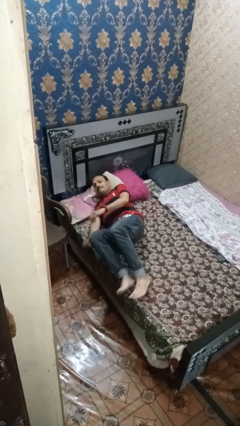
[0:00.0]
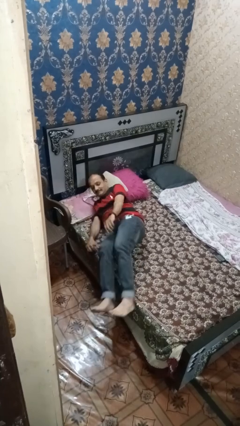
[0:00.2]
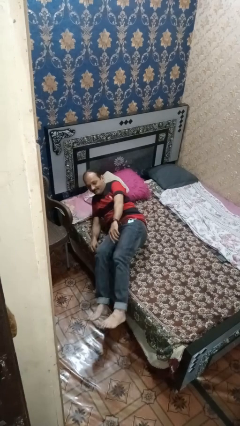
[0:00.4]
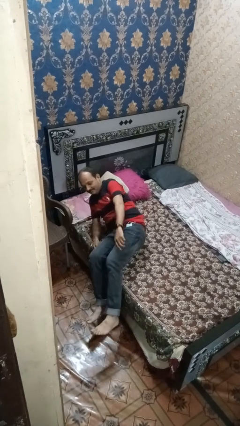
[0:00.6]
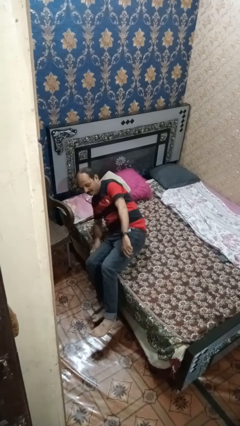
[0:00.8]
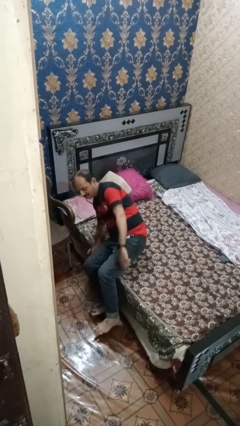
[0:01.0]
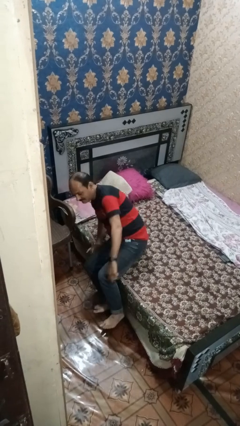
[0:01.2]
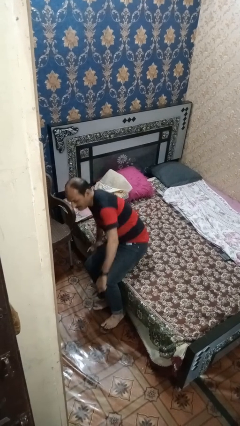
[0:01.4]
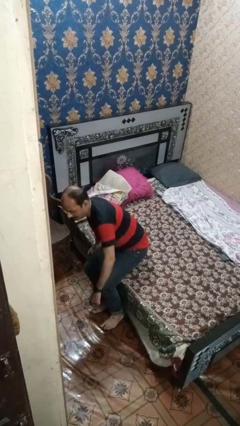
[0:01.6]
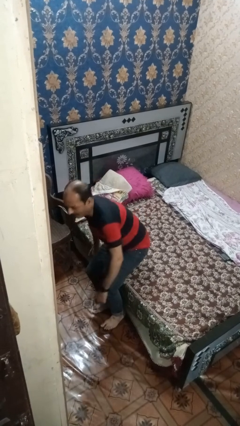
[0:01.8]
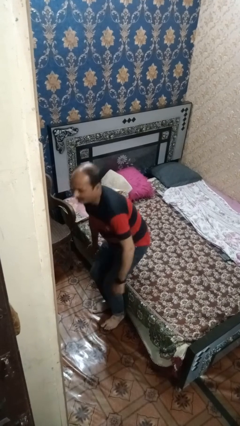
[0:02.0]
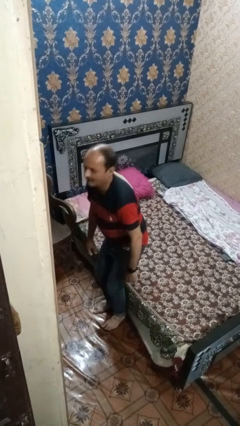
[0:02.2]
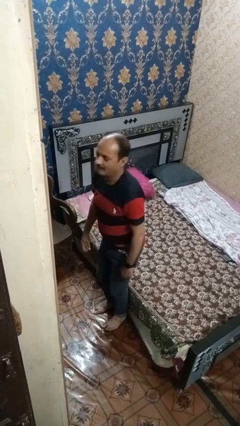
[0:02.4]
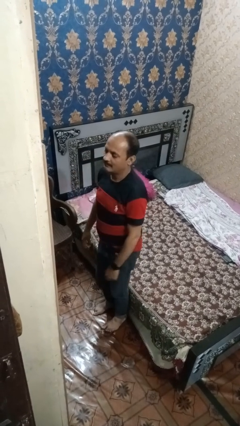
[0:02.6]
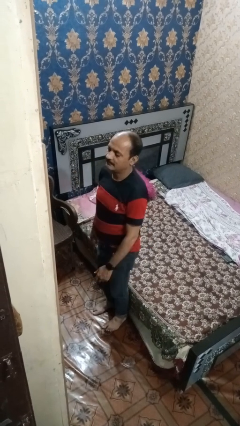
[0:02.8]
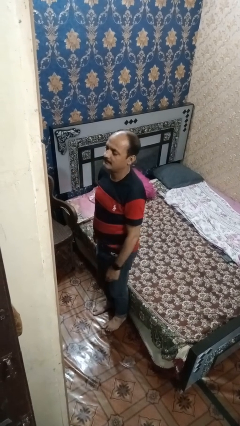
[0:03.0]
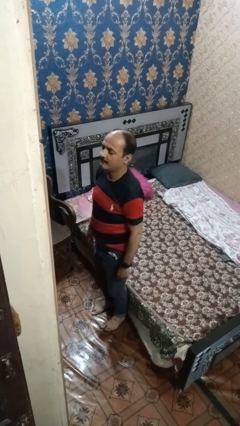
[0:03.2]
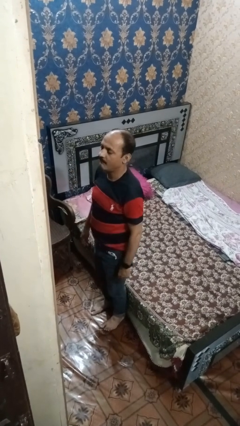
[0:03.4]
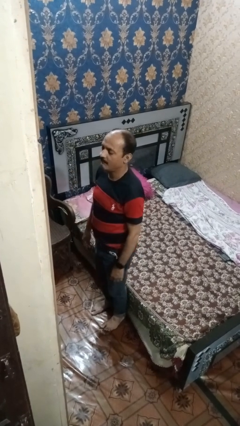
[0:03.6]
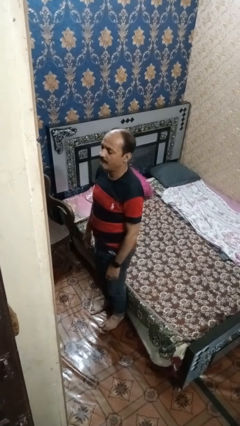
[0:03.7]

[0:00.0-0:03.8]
person stands up

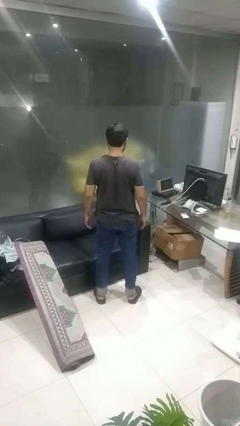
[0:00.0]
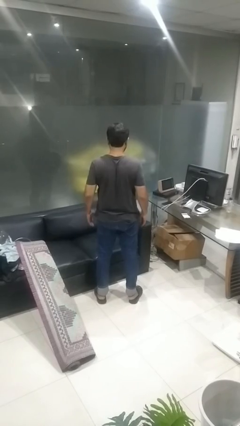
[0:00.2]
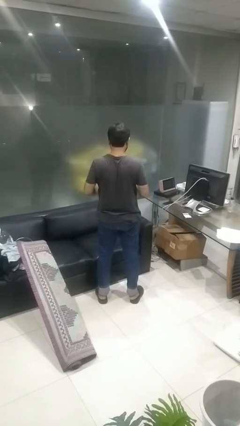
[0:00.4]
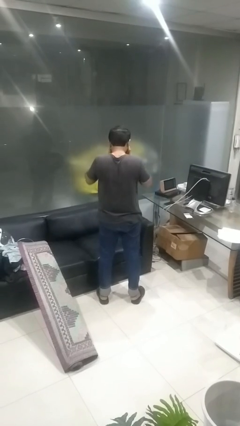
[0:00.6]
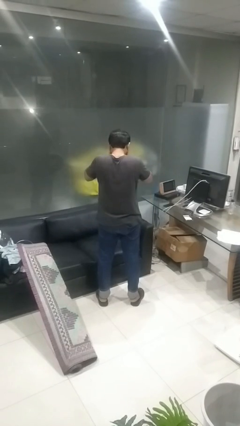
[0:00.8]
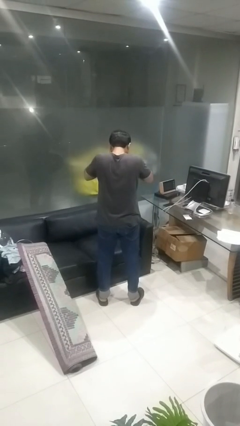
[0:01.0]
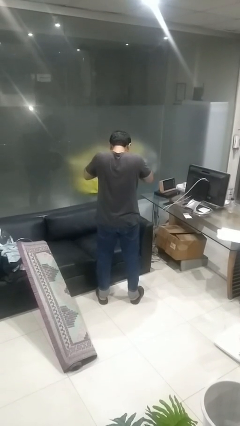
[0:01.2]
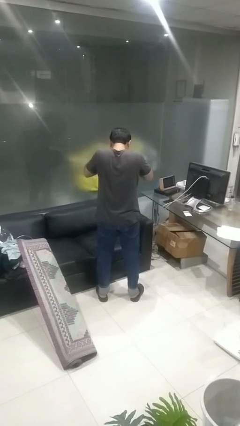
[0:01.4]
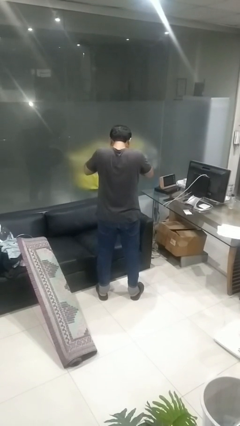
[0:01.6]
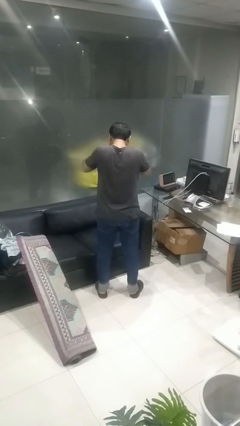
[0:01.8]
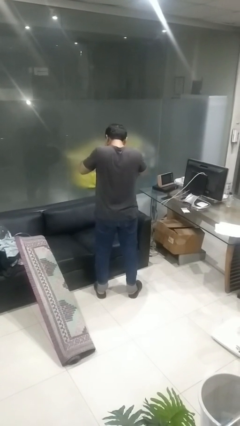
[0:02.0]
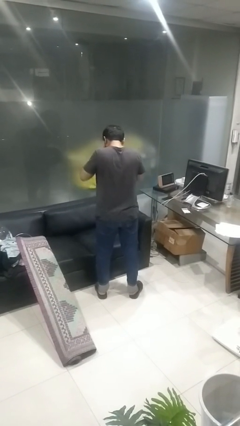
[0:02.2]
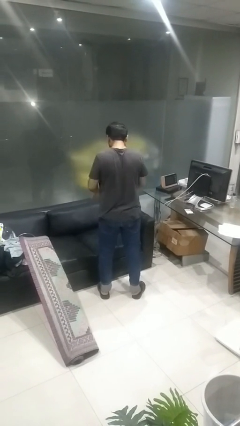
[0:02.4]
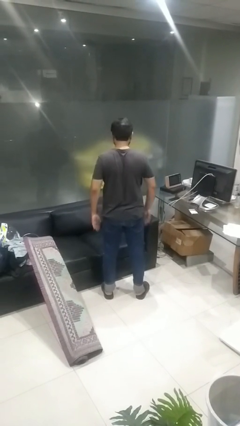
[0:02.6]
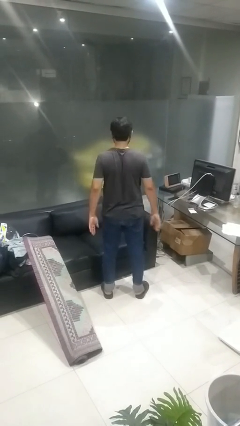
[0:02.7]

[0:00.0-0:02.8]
person covers face with hands

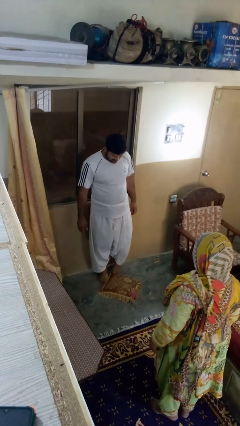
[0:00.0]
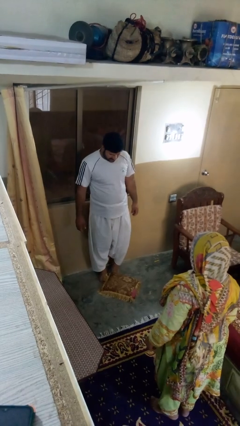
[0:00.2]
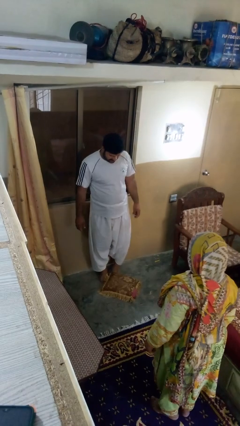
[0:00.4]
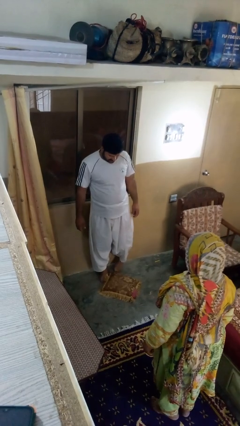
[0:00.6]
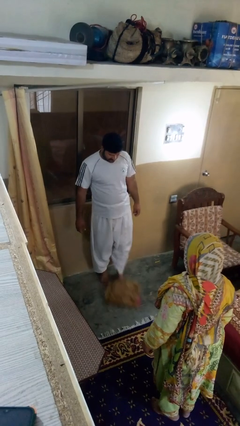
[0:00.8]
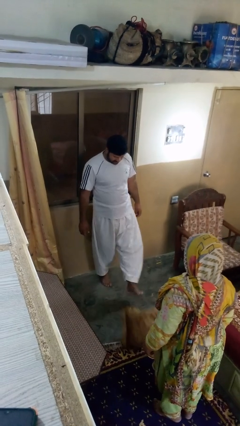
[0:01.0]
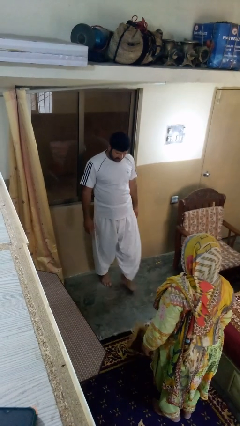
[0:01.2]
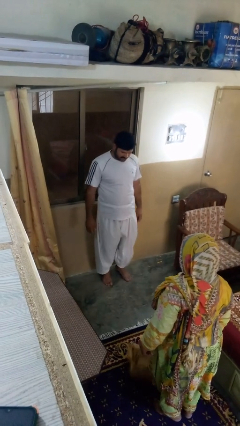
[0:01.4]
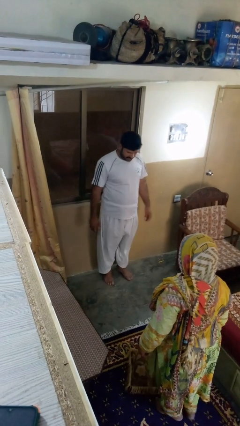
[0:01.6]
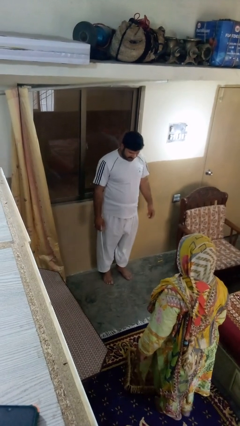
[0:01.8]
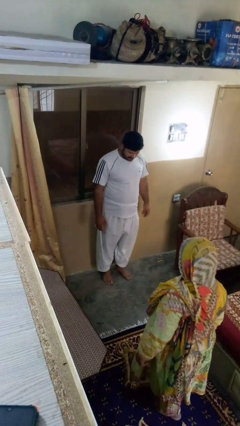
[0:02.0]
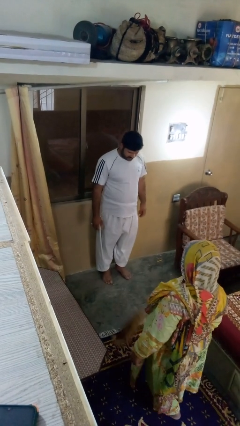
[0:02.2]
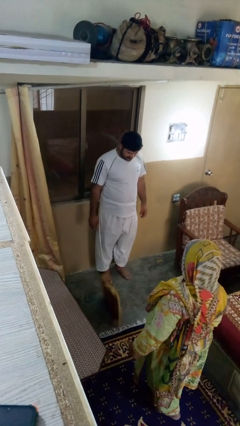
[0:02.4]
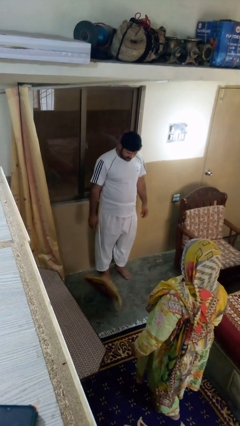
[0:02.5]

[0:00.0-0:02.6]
person kicks object to person

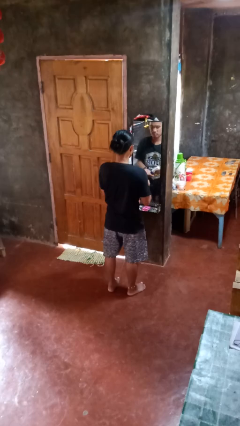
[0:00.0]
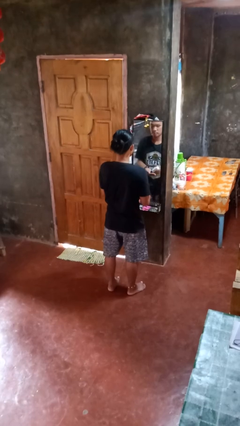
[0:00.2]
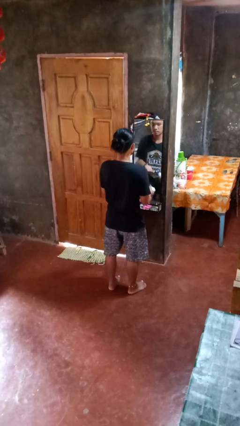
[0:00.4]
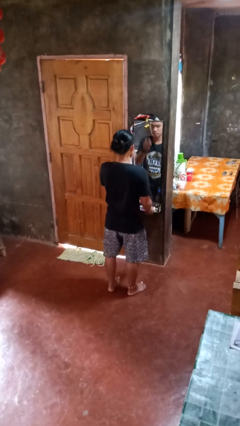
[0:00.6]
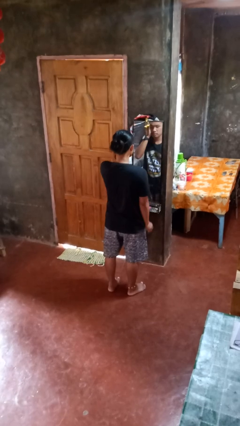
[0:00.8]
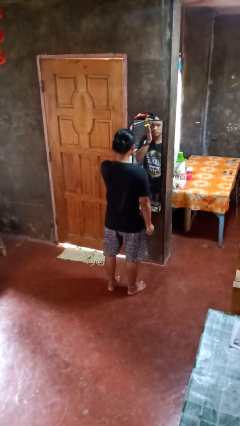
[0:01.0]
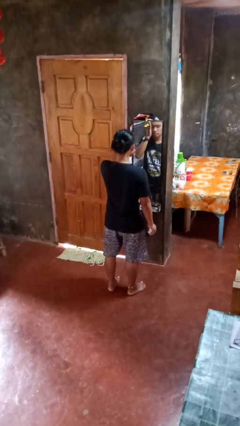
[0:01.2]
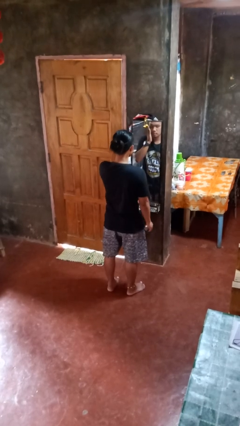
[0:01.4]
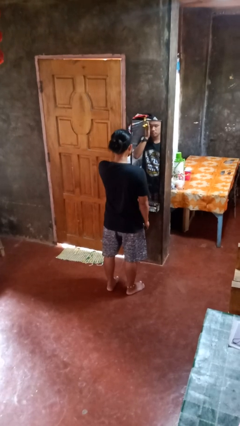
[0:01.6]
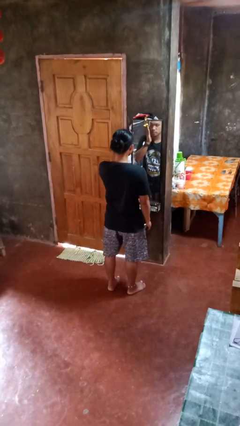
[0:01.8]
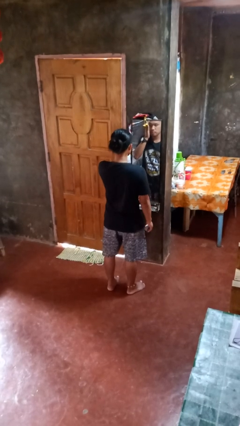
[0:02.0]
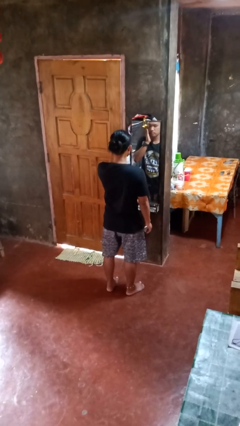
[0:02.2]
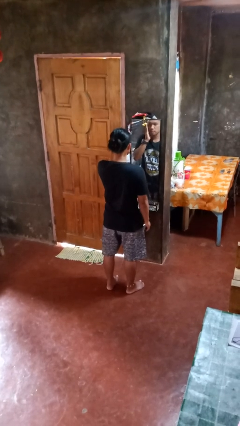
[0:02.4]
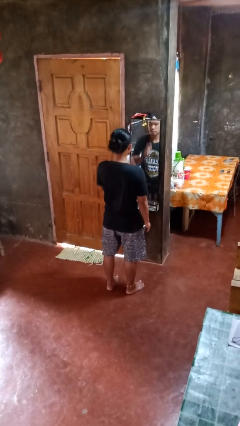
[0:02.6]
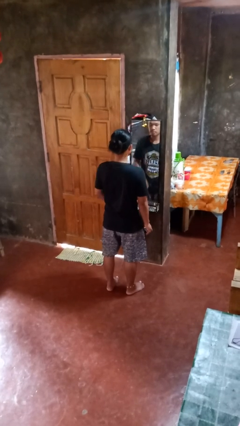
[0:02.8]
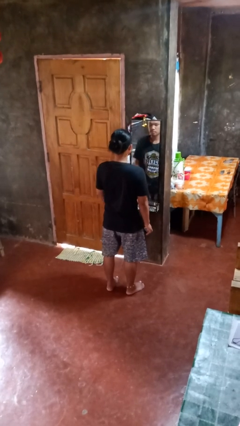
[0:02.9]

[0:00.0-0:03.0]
person applies eye makeup

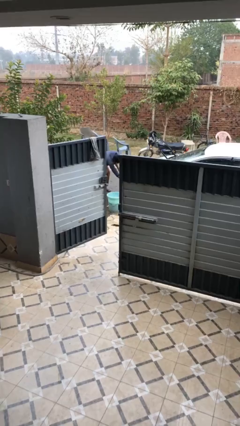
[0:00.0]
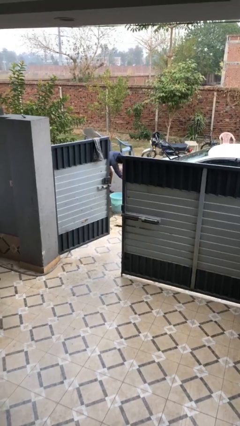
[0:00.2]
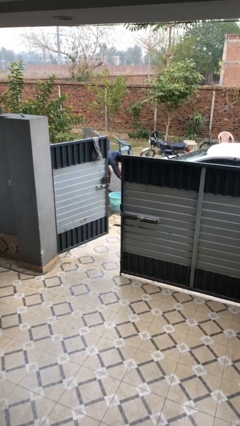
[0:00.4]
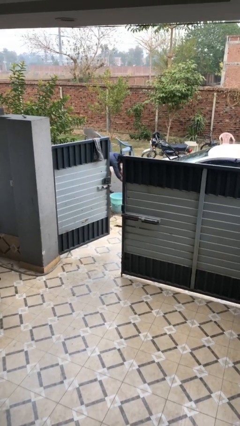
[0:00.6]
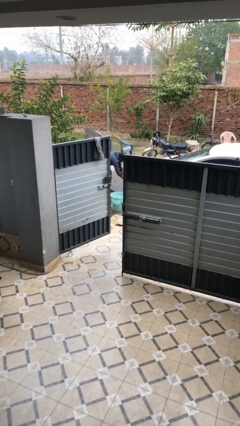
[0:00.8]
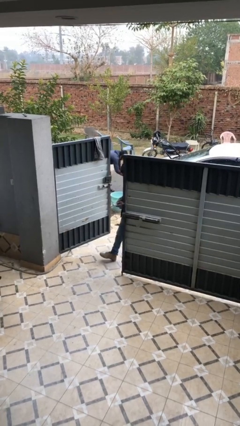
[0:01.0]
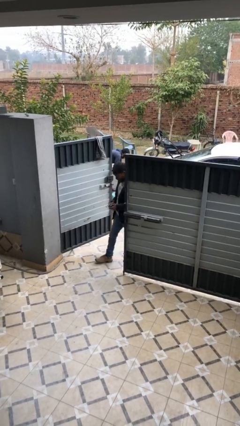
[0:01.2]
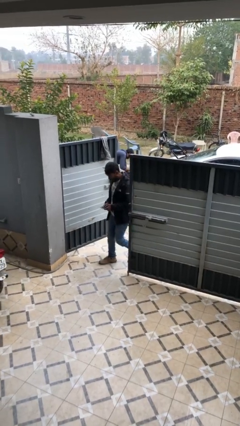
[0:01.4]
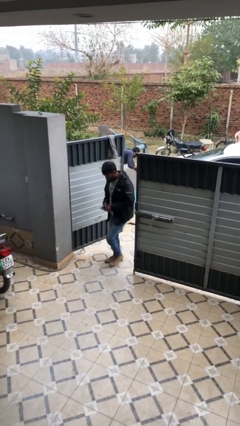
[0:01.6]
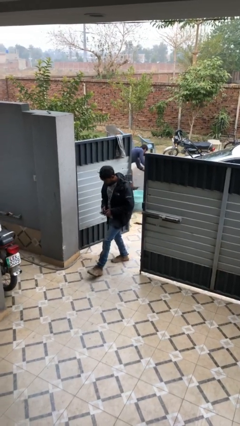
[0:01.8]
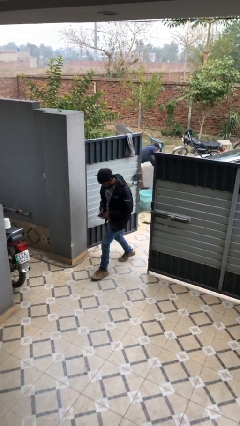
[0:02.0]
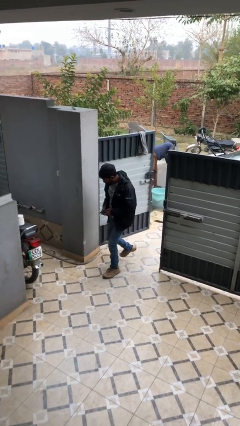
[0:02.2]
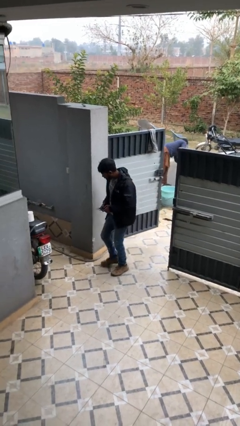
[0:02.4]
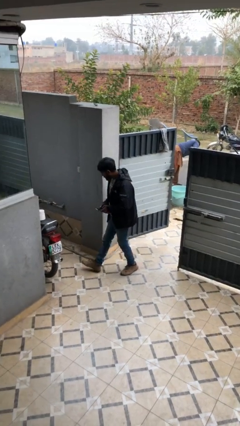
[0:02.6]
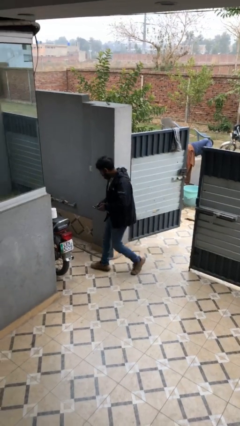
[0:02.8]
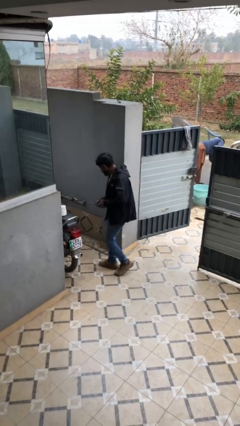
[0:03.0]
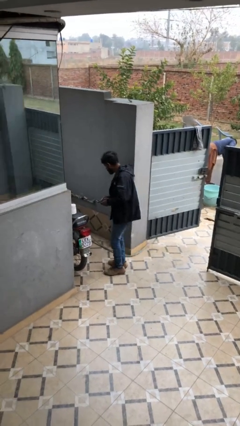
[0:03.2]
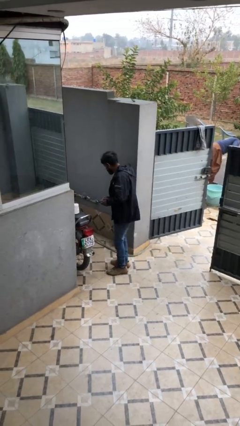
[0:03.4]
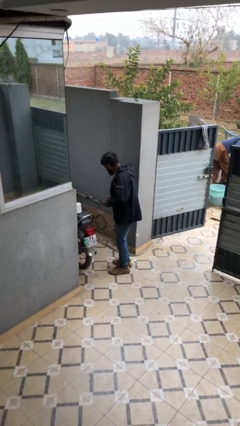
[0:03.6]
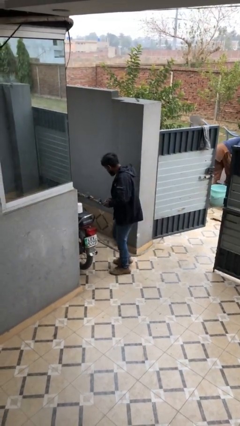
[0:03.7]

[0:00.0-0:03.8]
person enters scene through structure

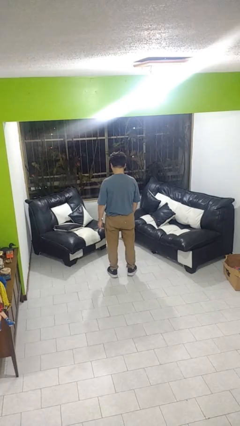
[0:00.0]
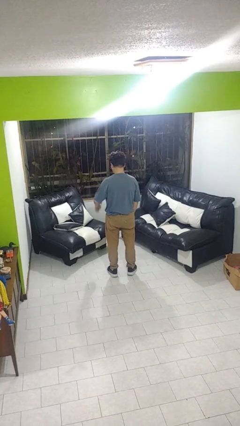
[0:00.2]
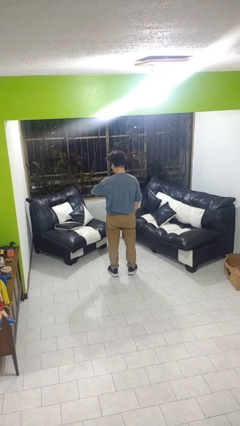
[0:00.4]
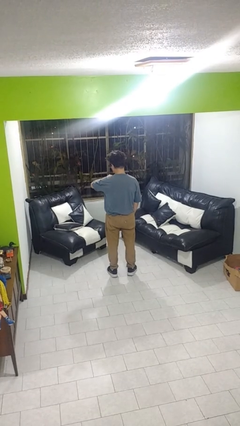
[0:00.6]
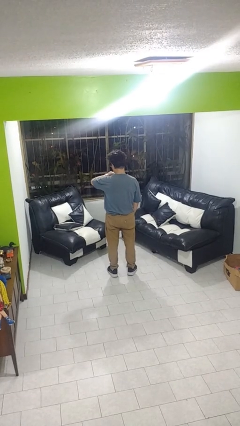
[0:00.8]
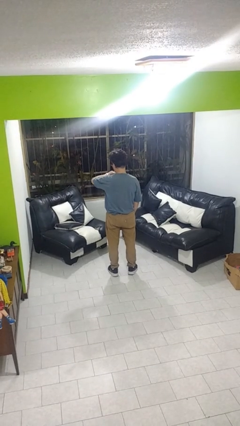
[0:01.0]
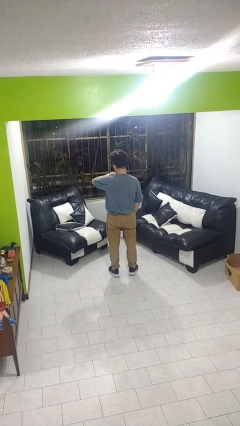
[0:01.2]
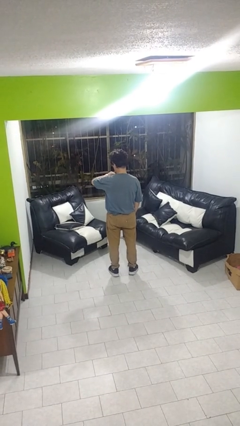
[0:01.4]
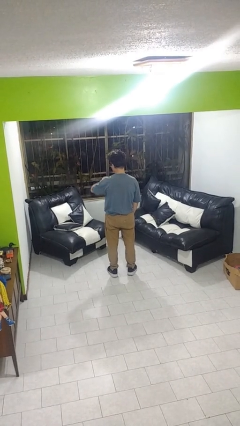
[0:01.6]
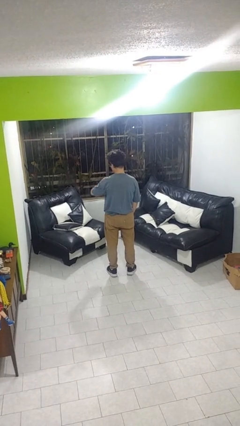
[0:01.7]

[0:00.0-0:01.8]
person looks at wristwatch
